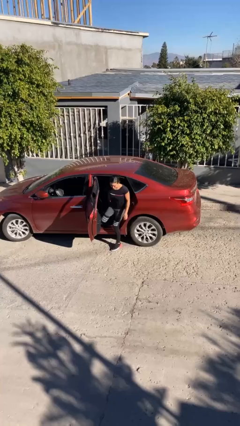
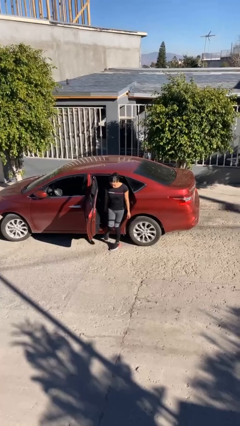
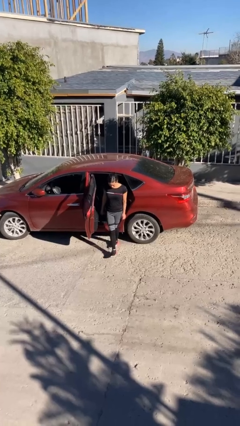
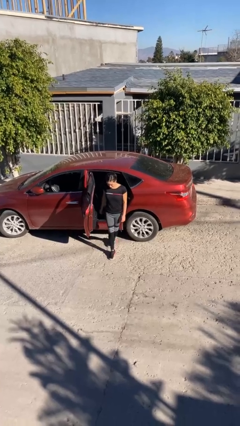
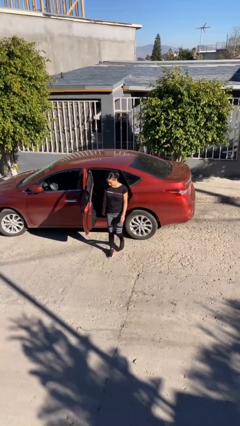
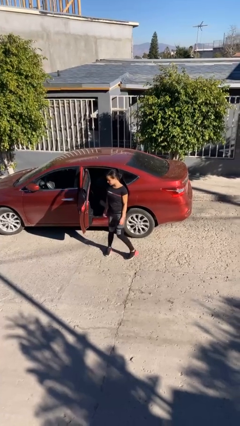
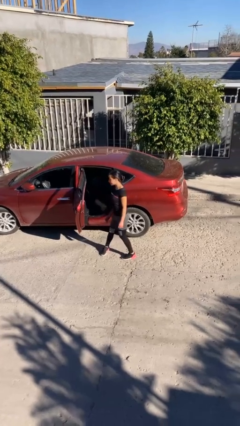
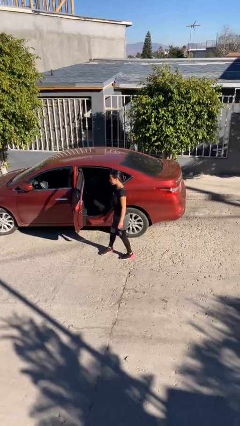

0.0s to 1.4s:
person exits car

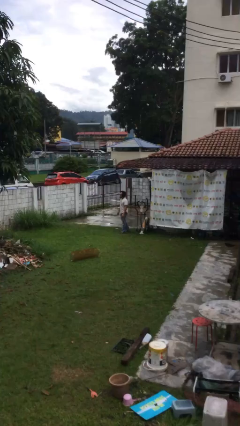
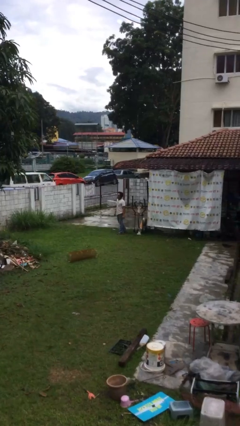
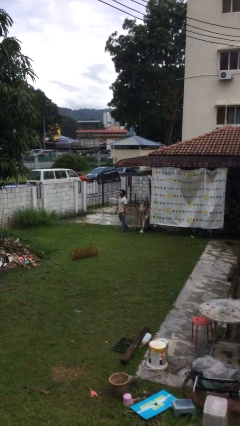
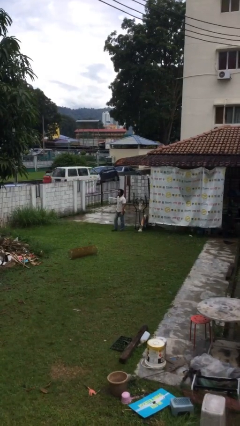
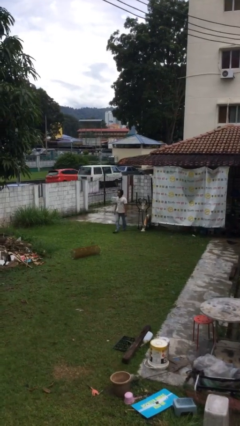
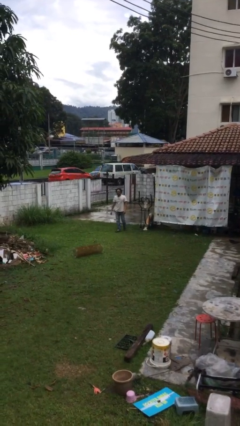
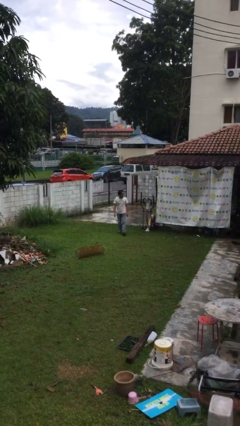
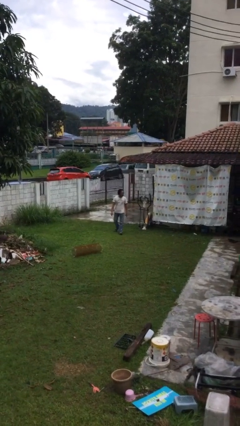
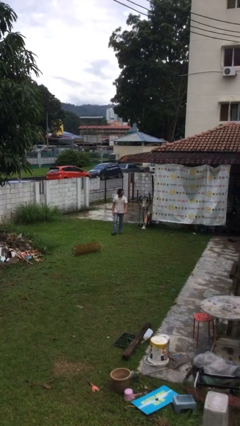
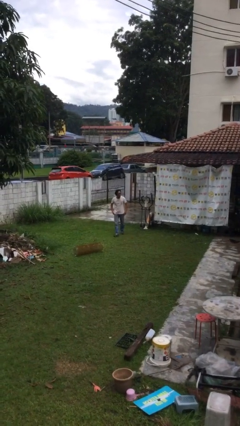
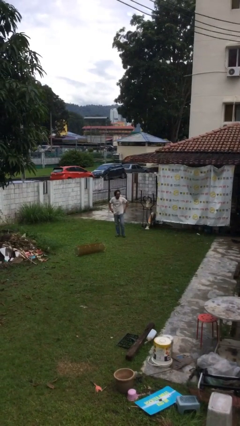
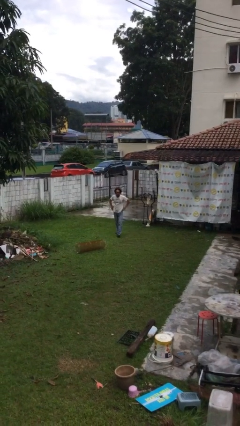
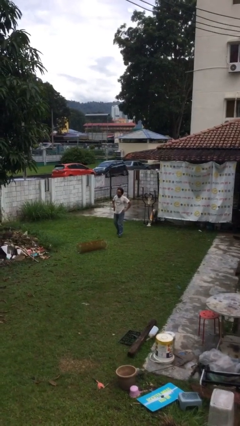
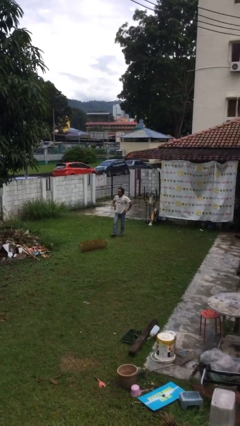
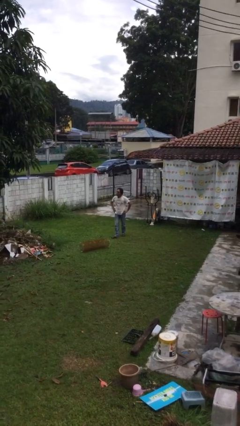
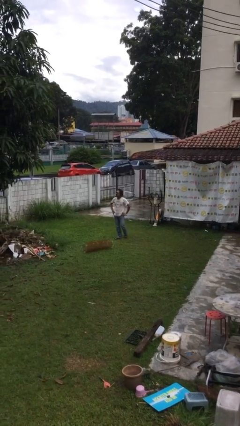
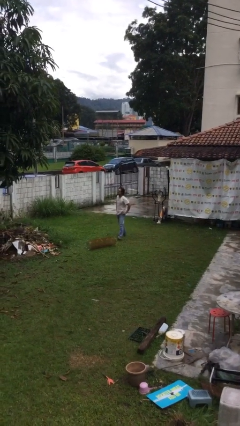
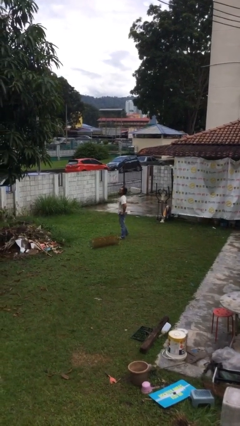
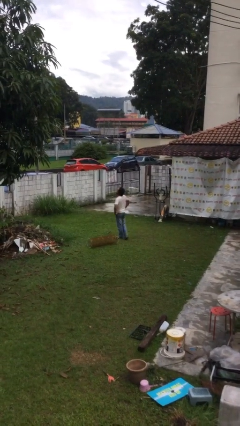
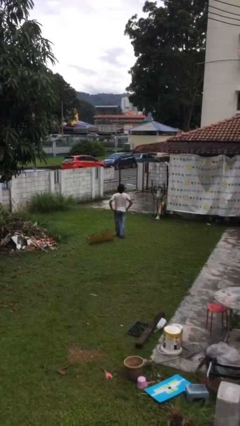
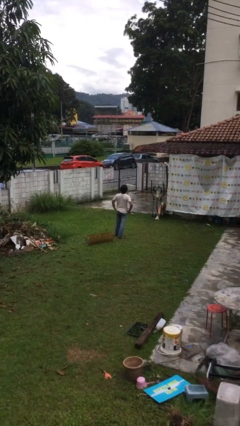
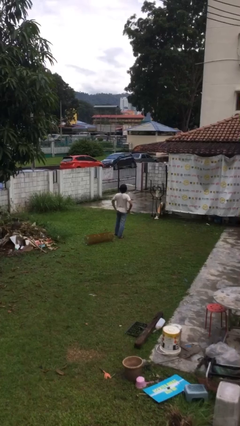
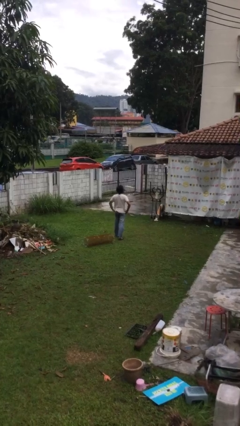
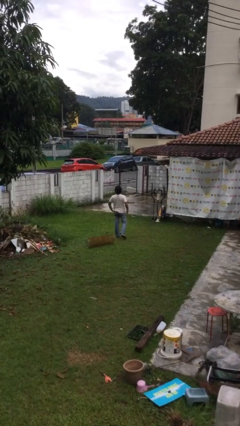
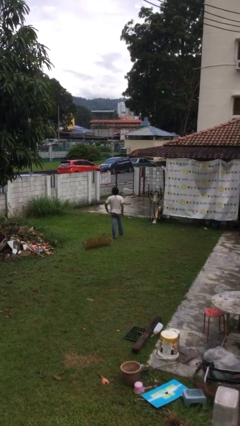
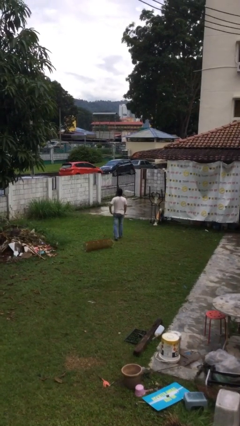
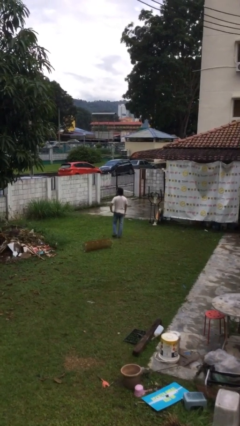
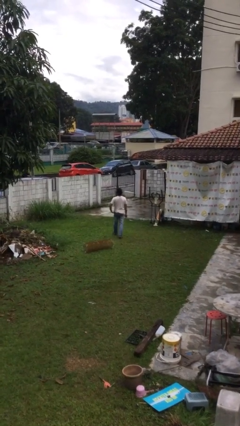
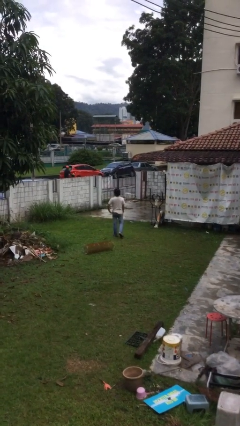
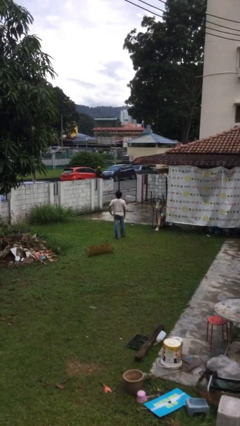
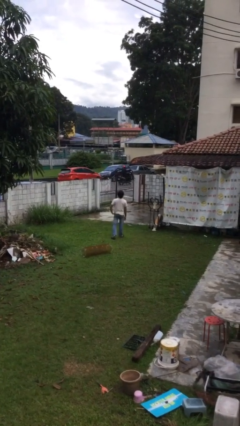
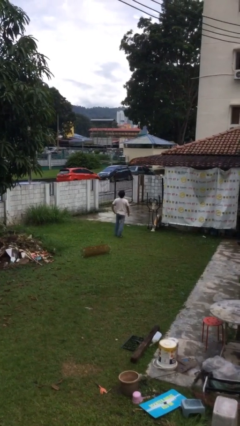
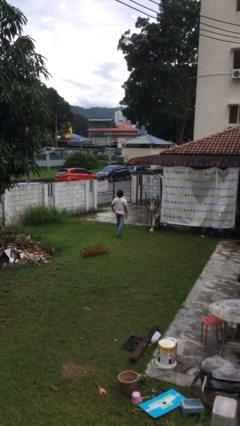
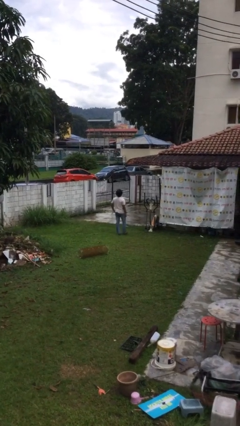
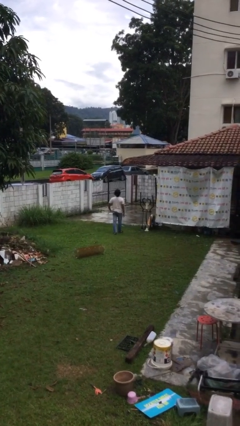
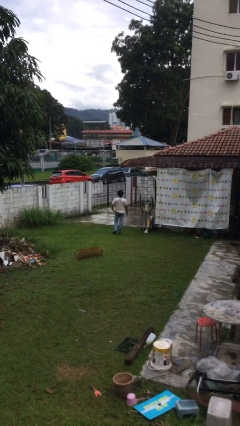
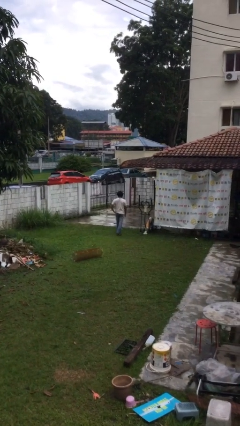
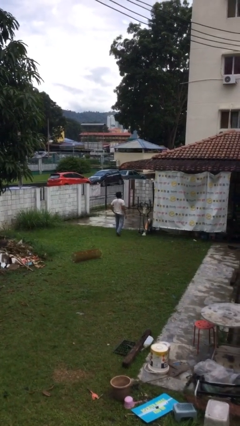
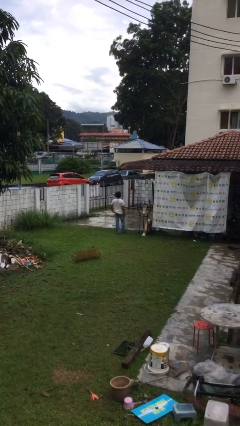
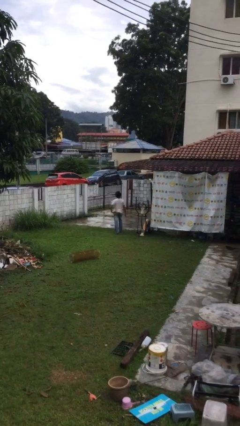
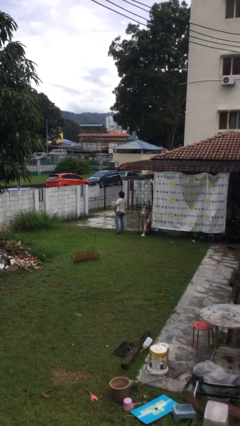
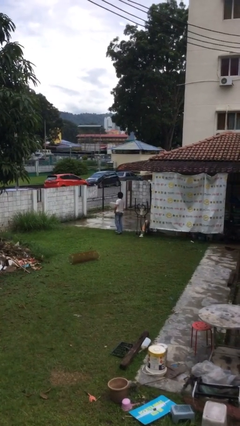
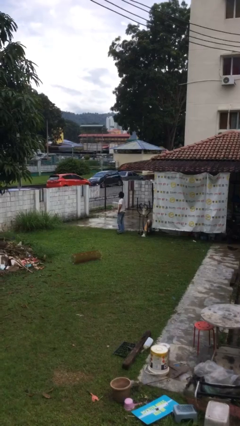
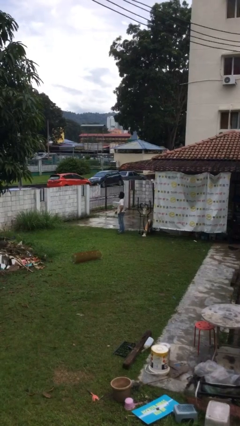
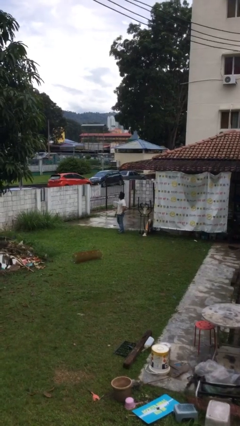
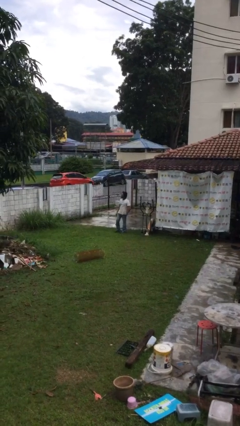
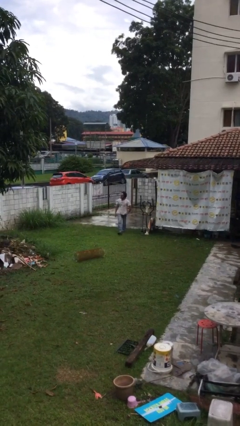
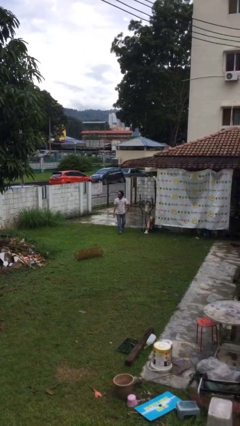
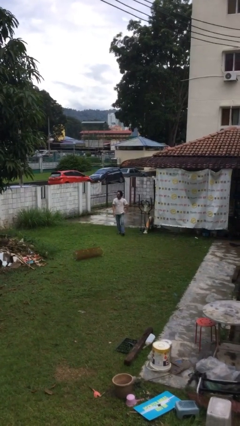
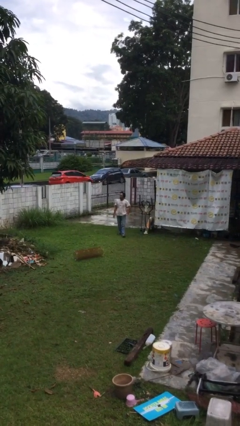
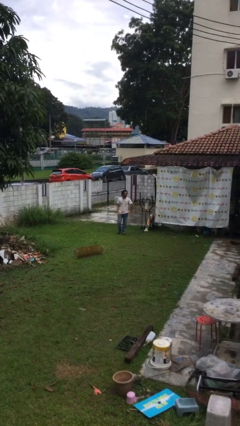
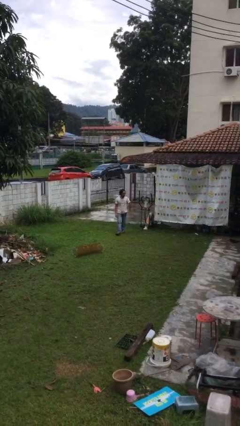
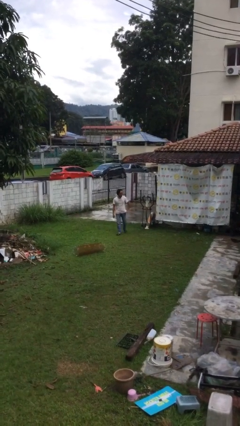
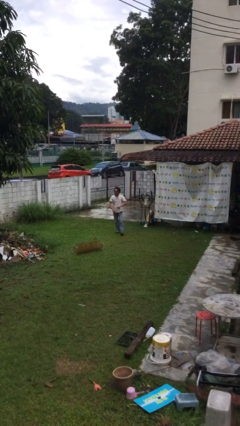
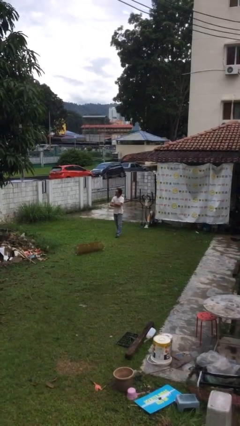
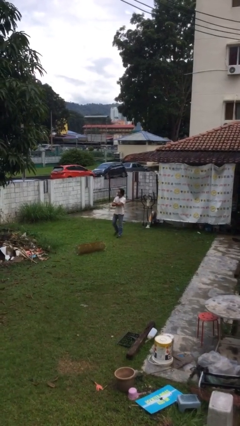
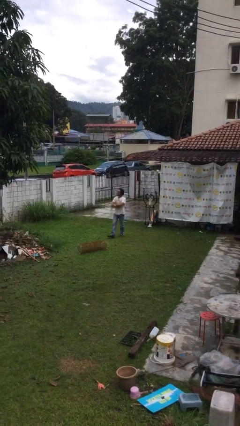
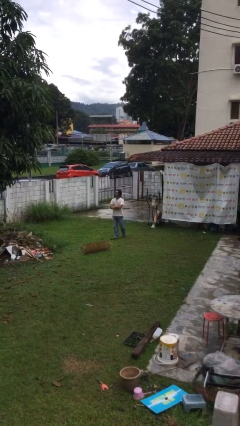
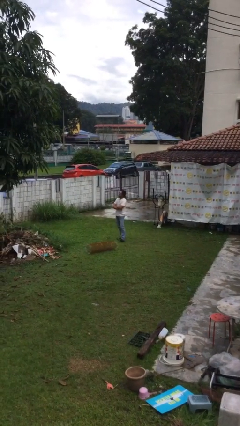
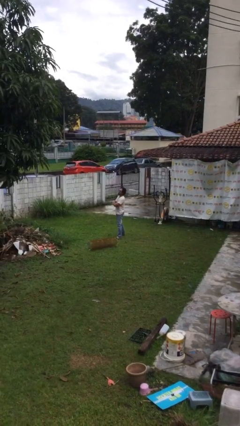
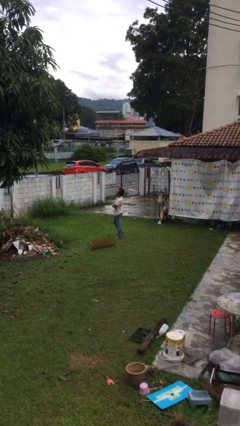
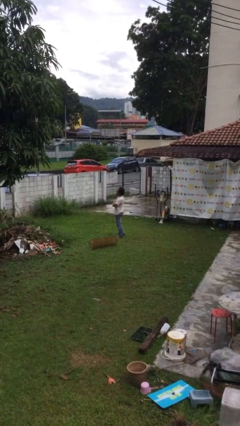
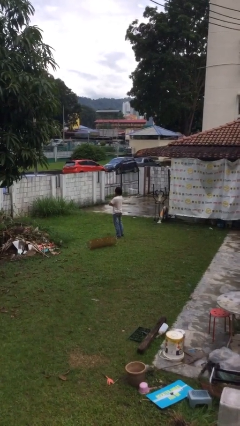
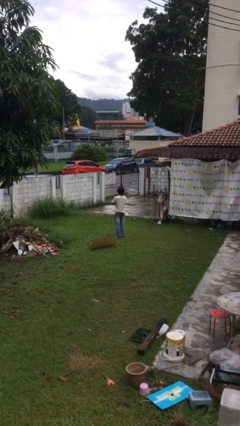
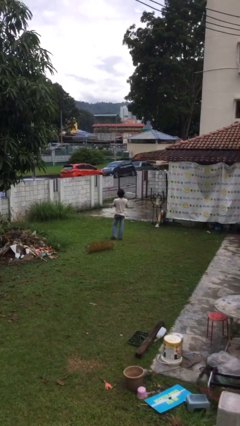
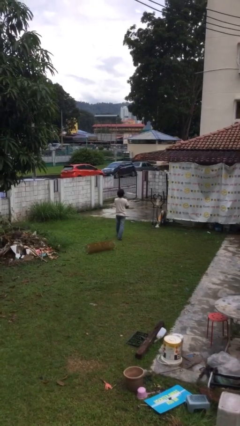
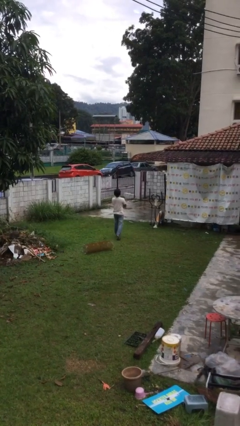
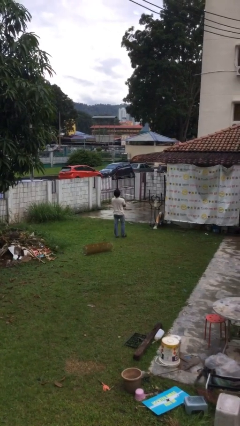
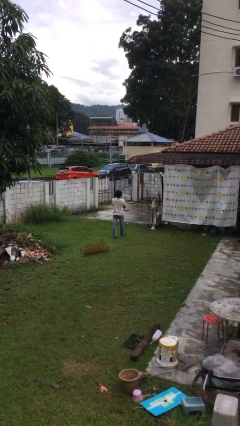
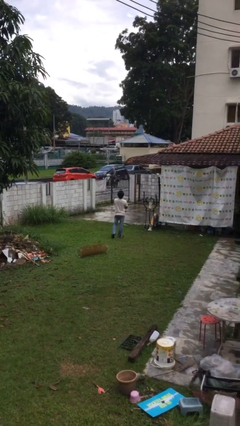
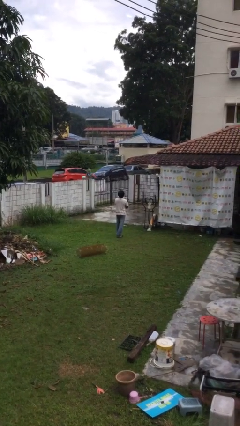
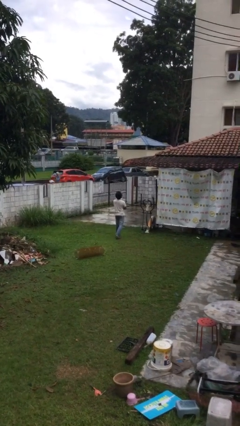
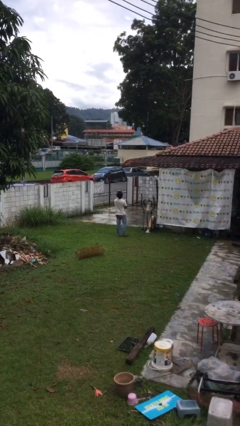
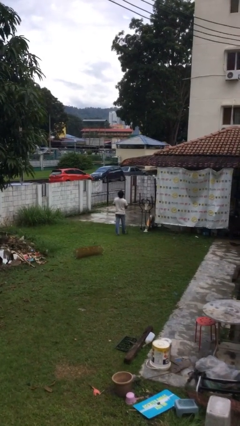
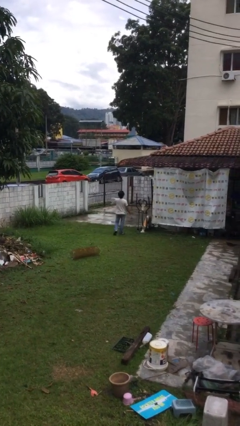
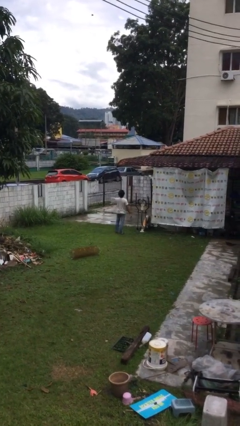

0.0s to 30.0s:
person walks

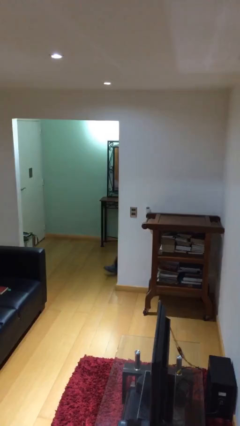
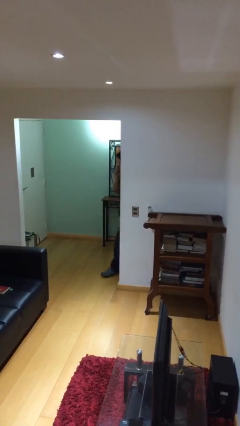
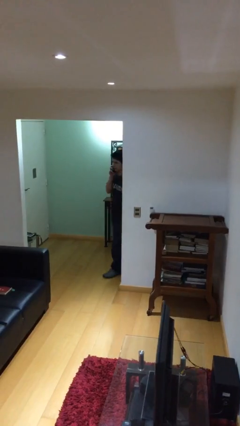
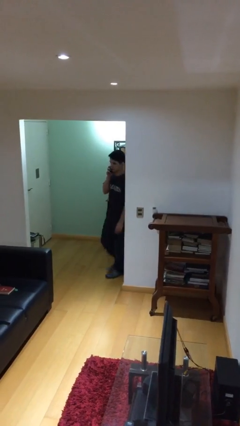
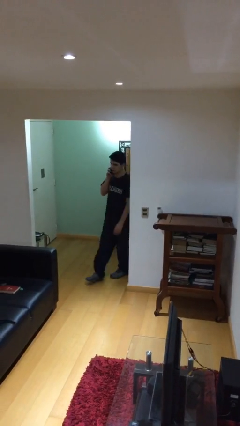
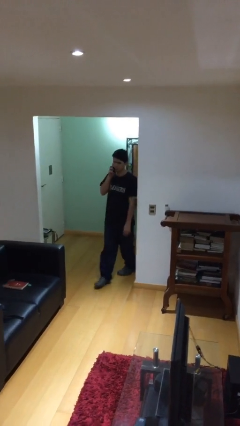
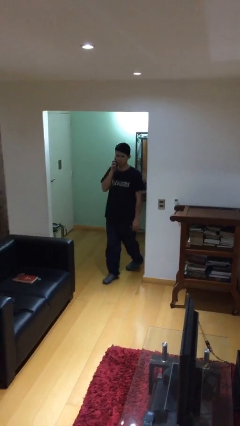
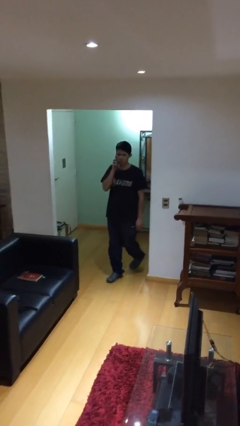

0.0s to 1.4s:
person enters scene through structure

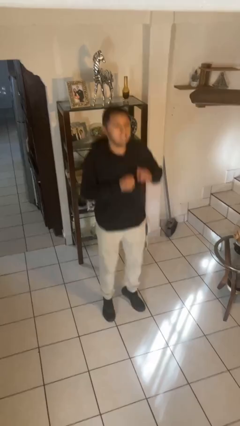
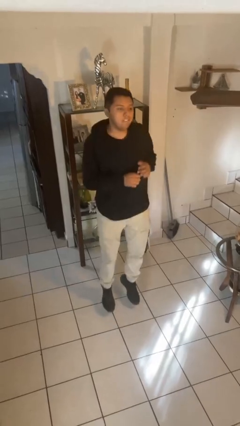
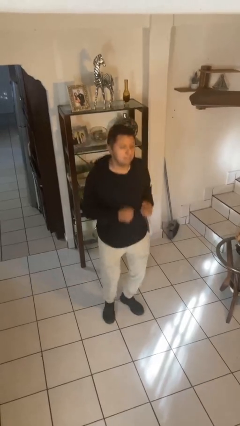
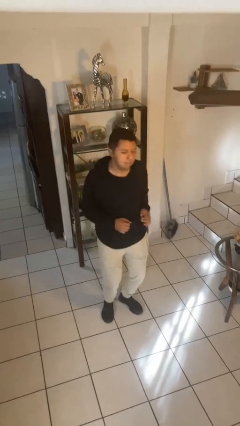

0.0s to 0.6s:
person jumps
